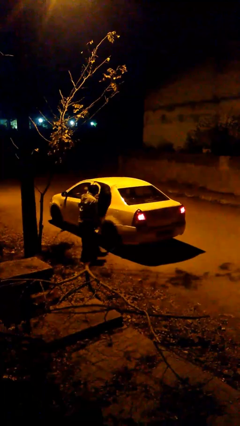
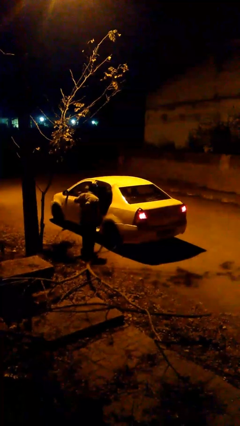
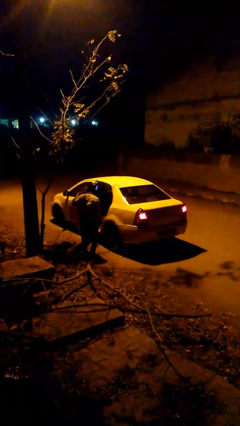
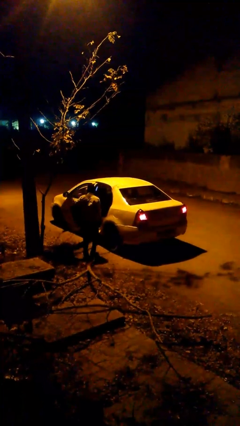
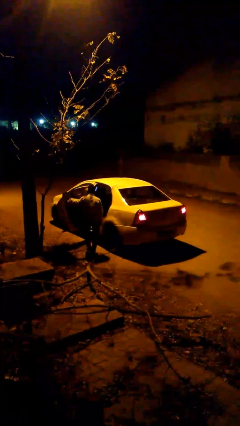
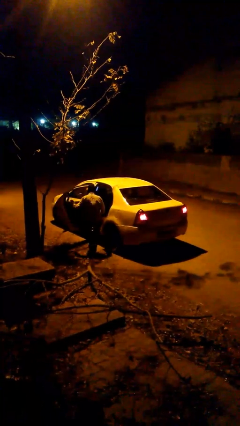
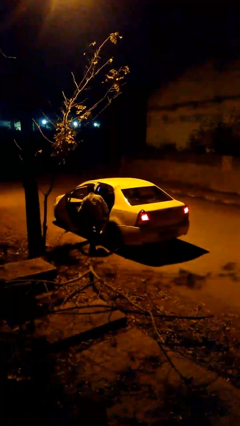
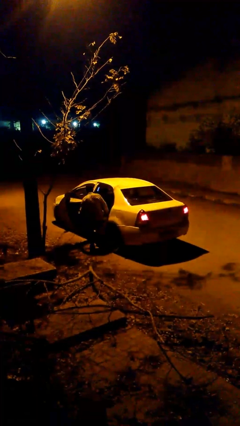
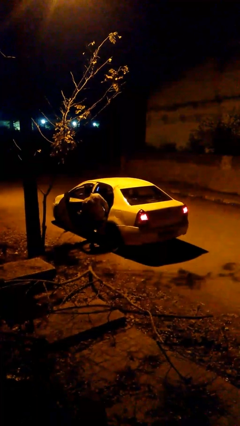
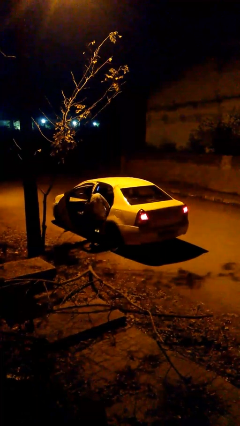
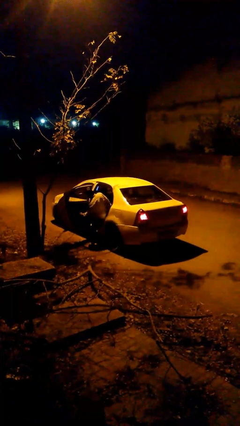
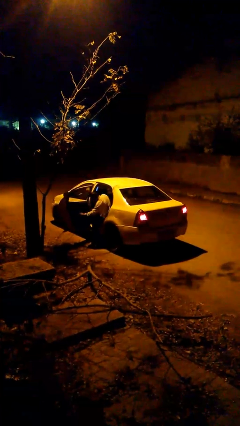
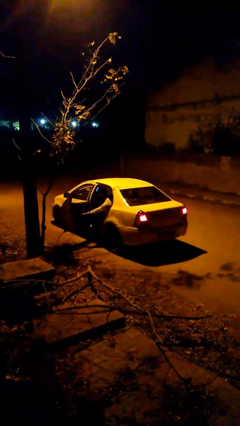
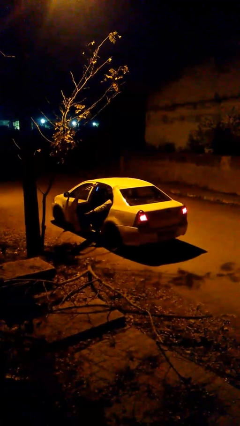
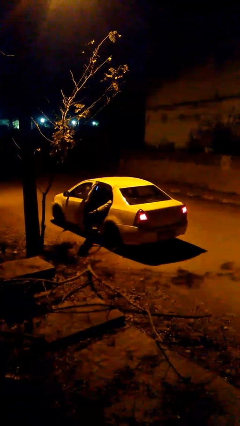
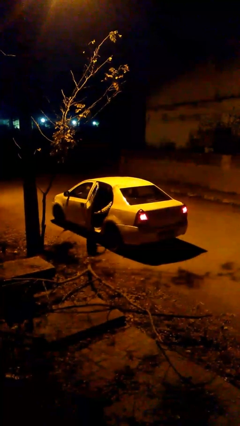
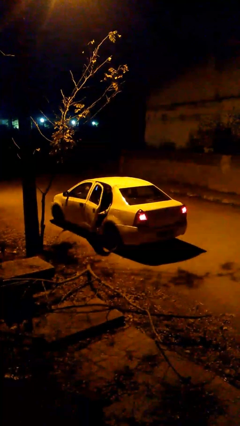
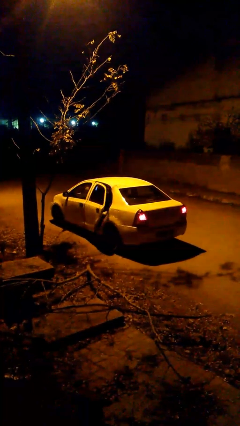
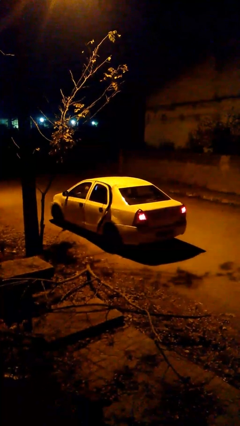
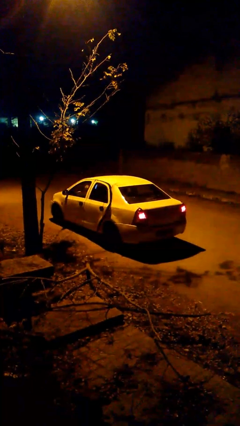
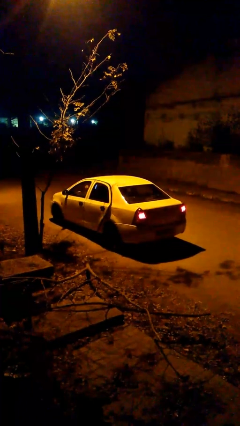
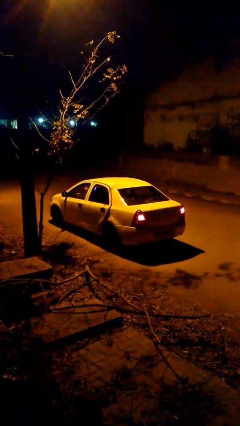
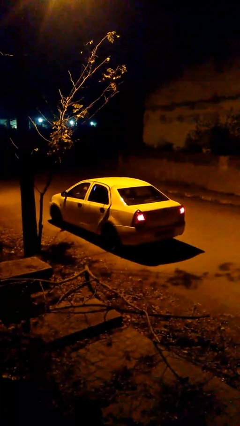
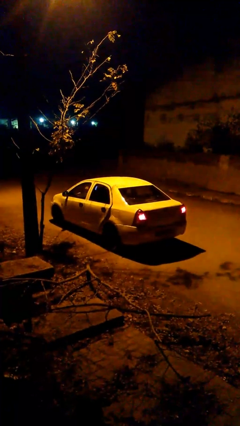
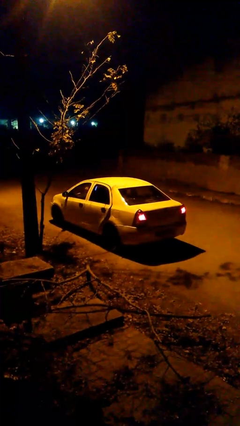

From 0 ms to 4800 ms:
car picks up person

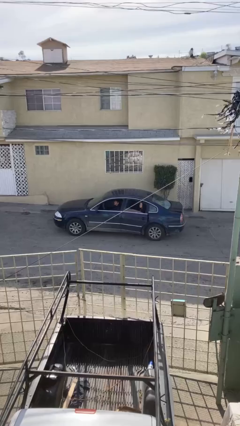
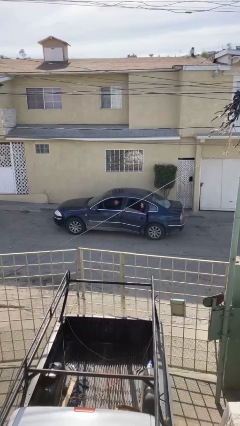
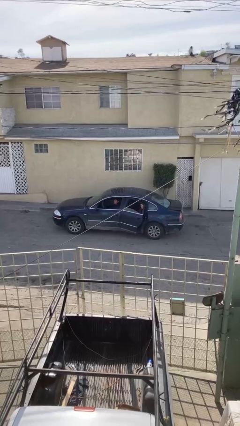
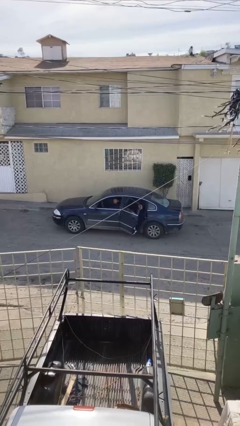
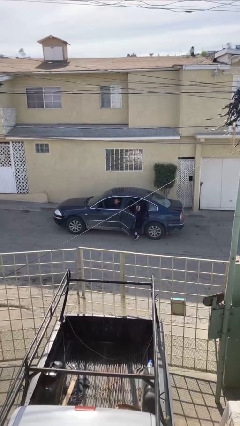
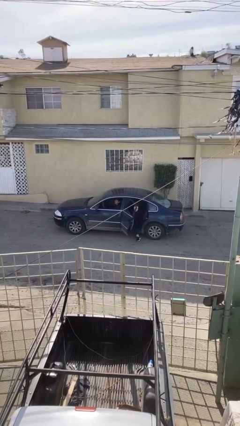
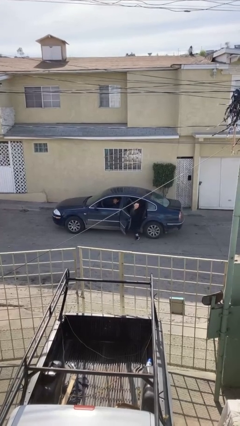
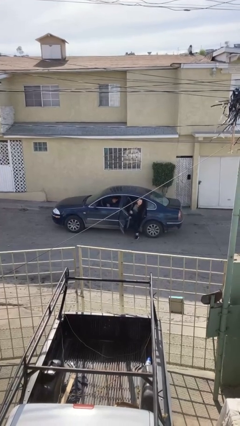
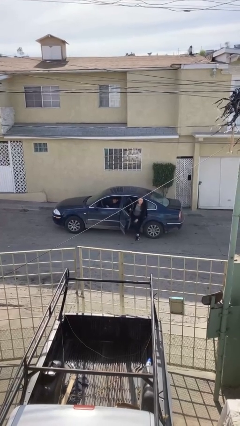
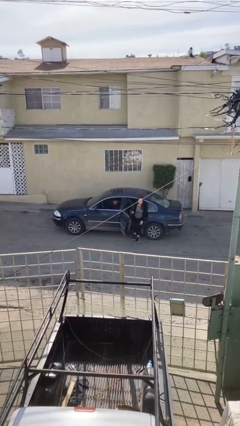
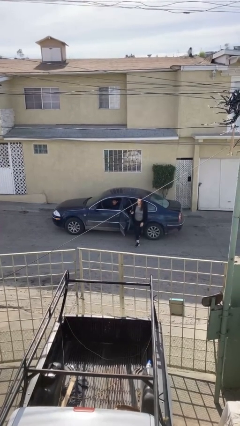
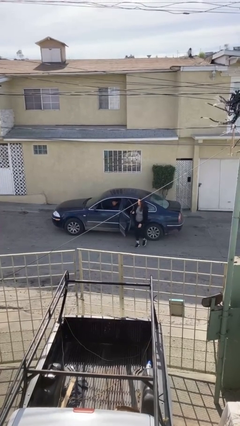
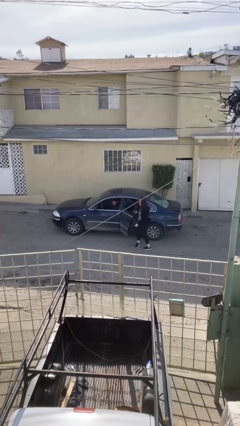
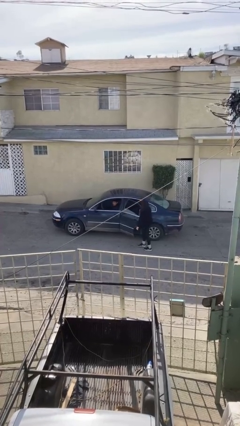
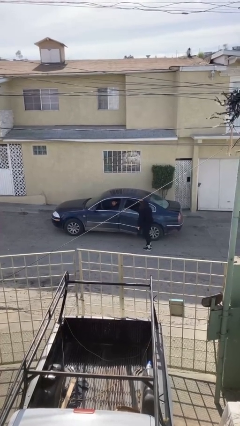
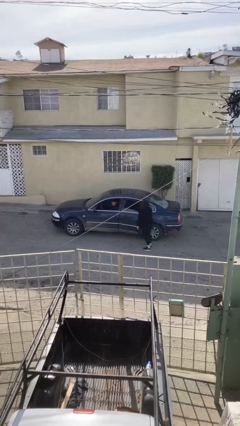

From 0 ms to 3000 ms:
car drops off person

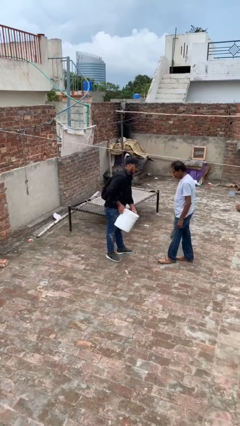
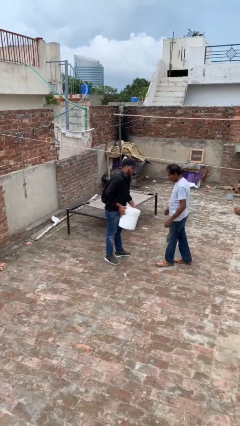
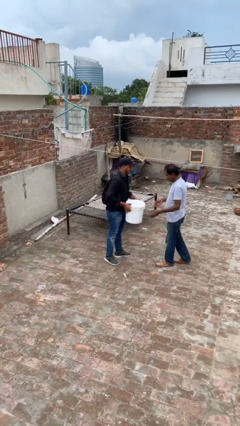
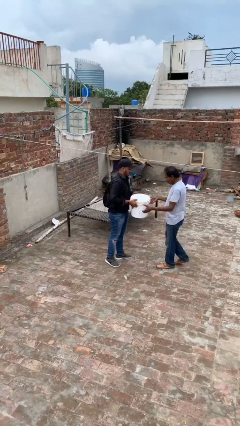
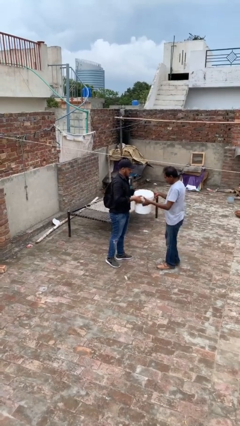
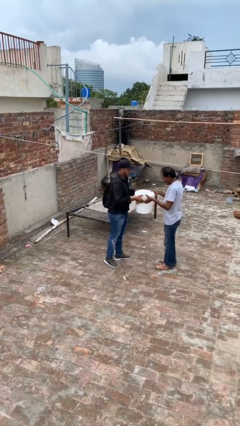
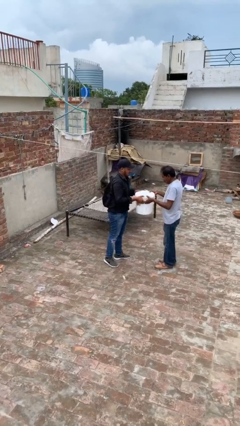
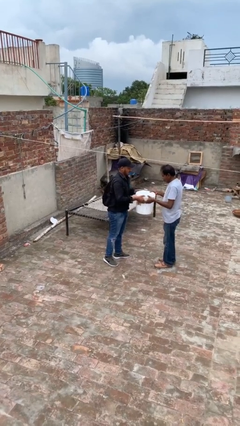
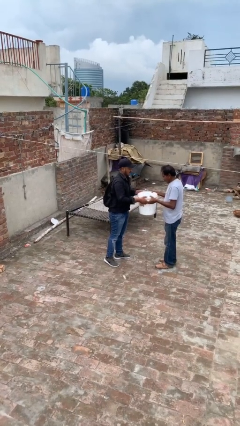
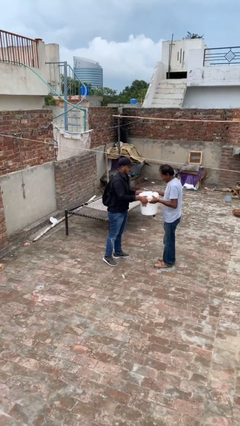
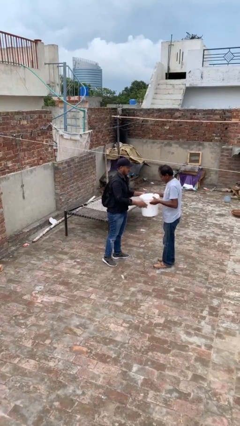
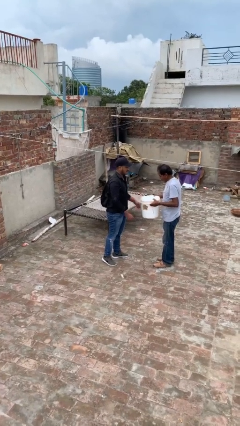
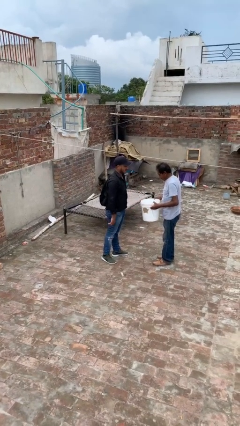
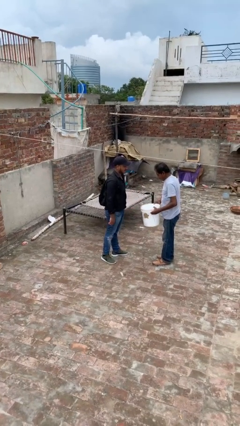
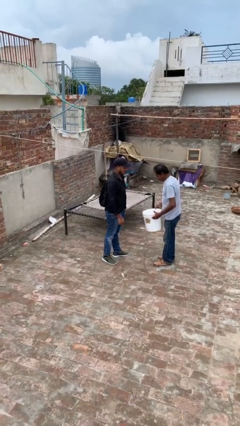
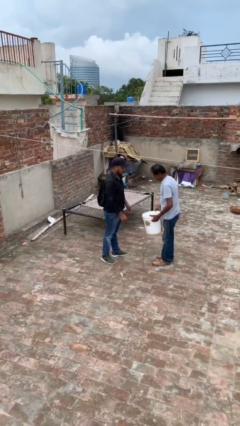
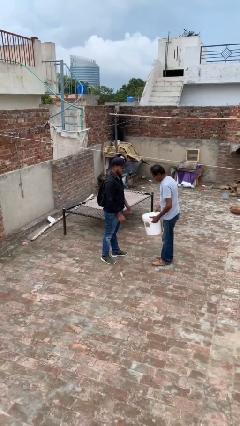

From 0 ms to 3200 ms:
person transfers object to person

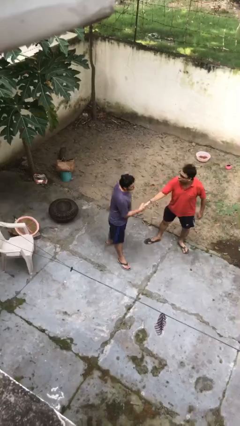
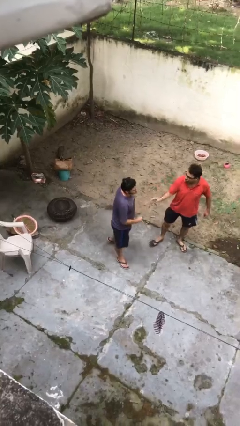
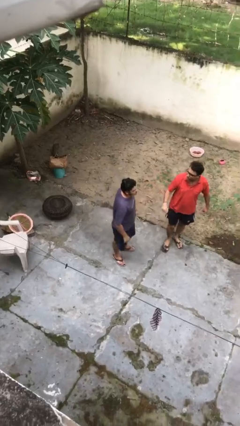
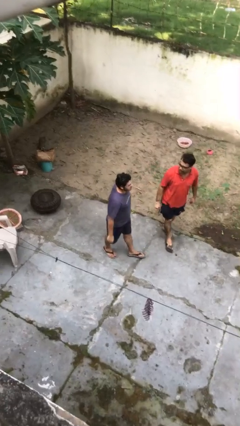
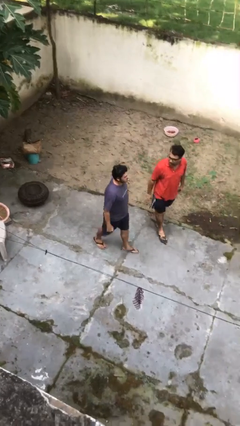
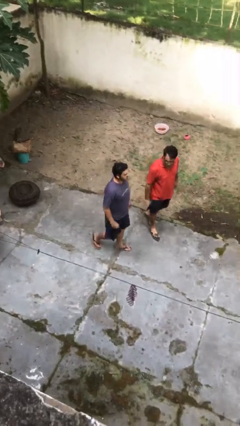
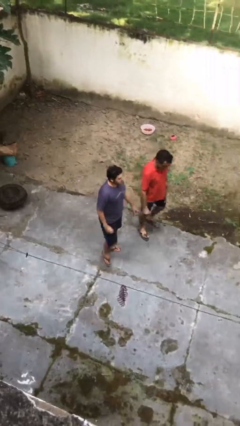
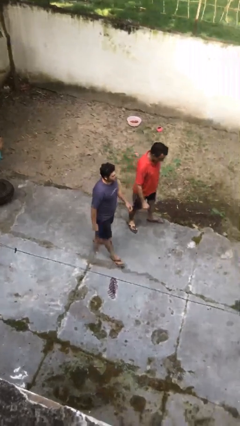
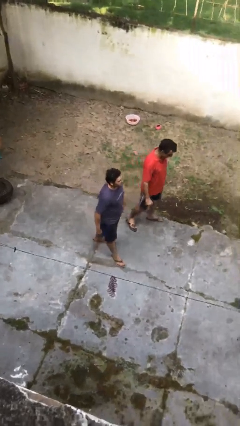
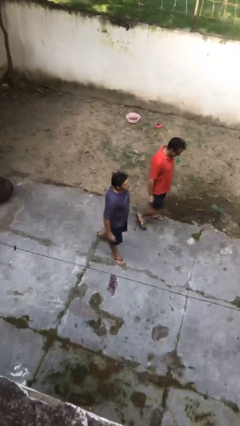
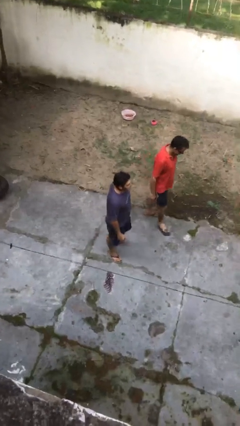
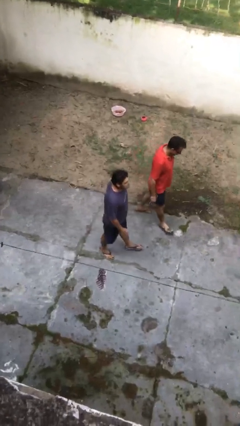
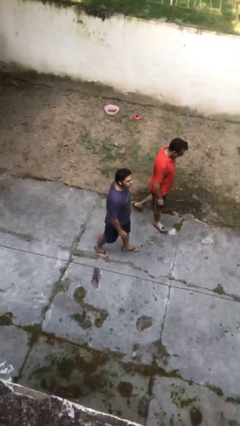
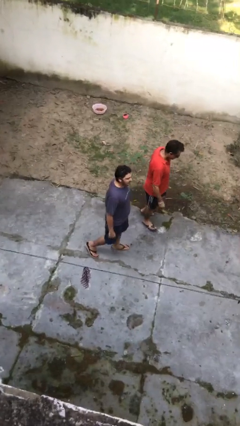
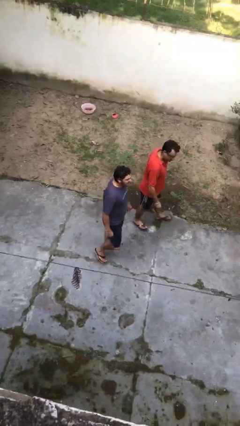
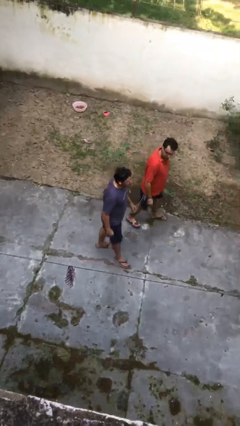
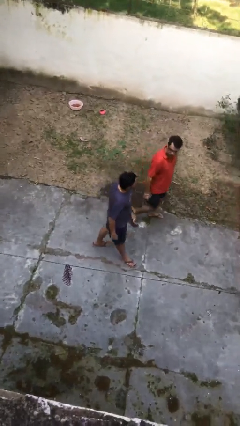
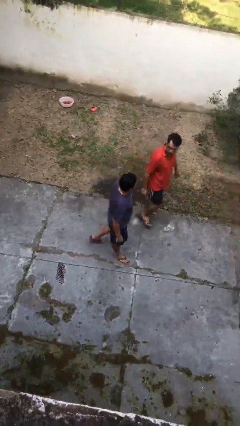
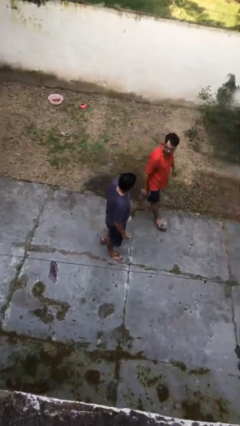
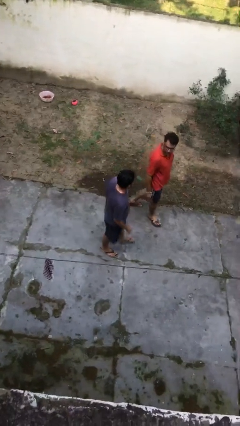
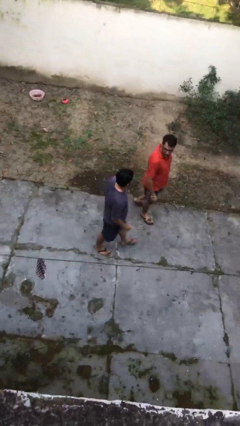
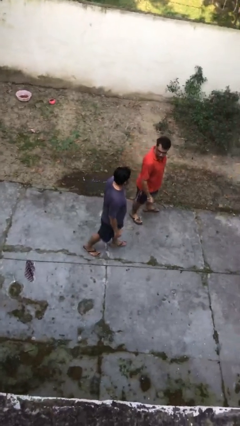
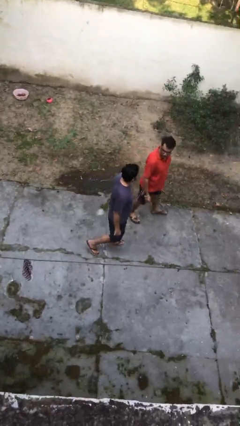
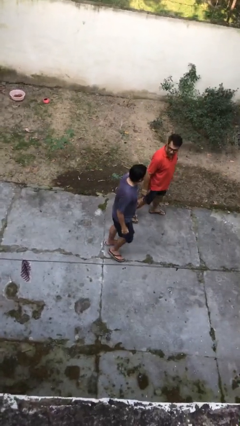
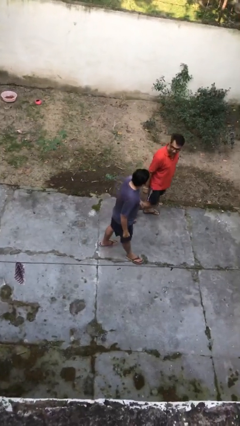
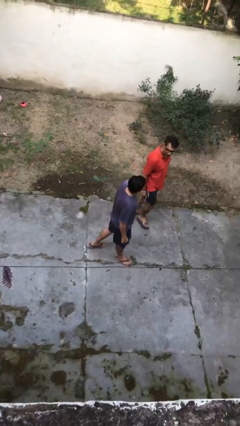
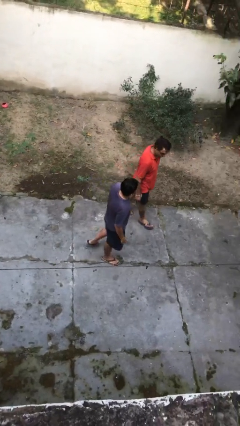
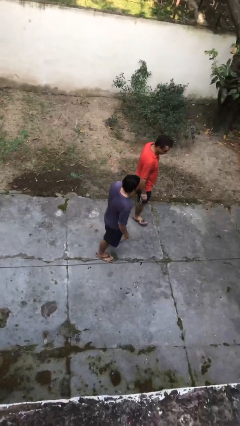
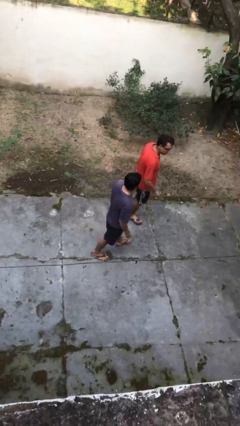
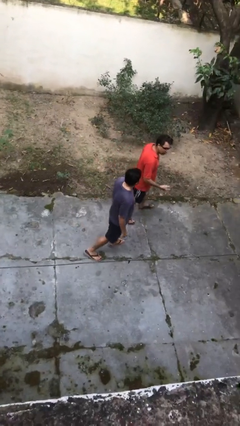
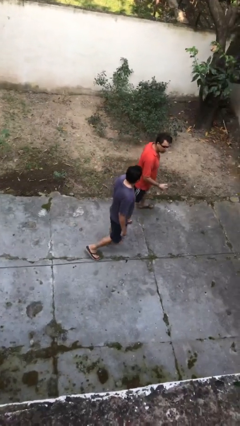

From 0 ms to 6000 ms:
person talks to person
